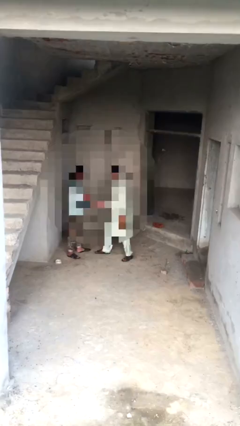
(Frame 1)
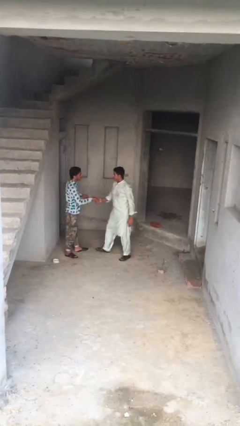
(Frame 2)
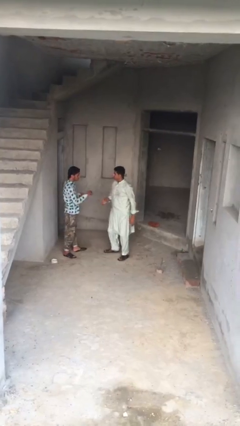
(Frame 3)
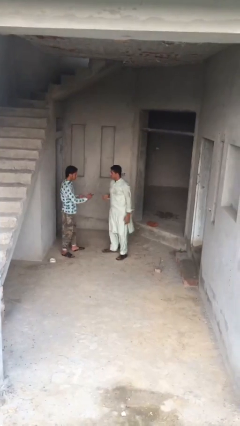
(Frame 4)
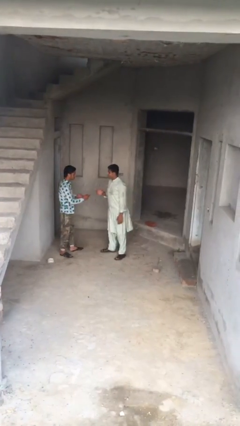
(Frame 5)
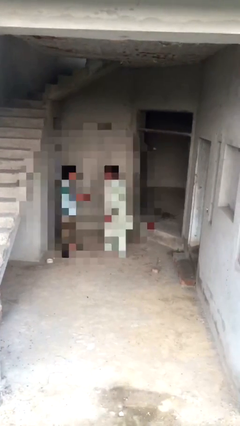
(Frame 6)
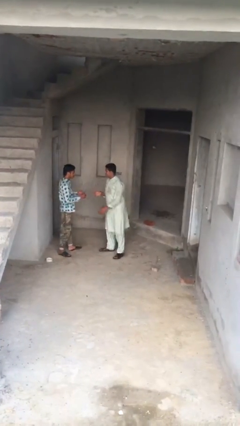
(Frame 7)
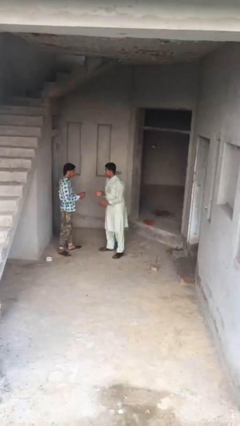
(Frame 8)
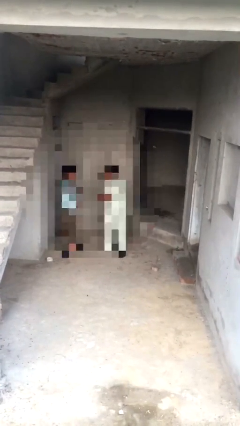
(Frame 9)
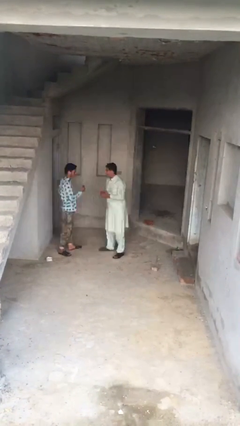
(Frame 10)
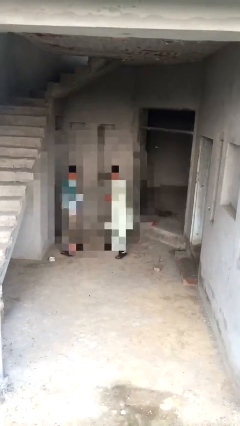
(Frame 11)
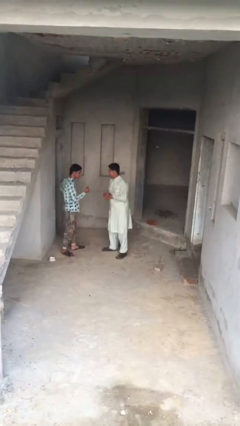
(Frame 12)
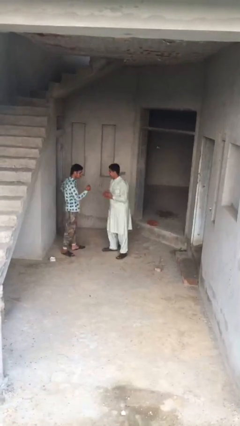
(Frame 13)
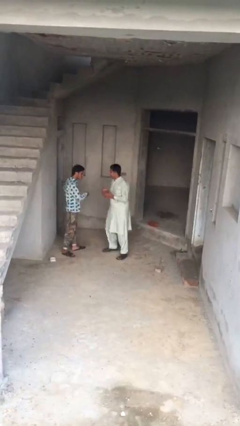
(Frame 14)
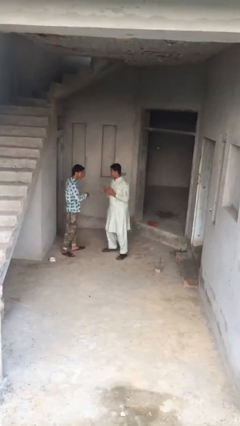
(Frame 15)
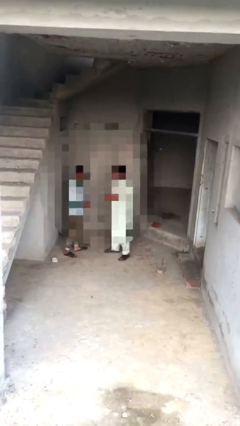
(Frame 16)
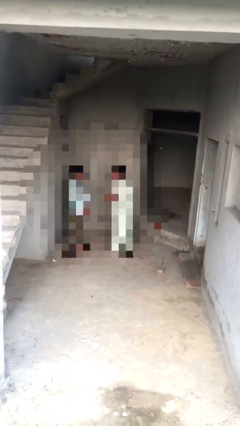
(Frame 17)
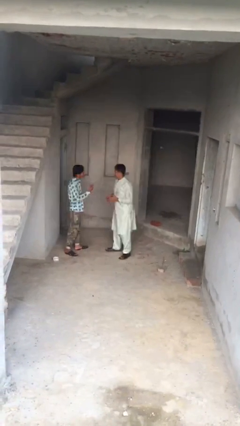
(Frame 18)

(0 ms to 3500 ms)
person talks to person

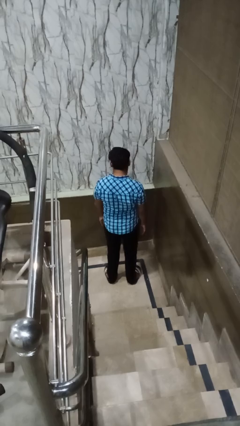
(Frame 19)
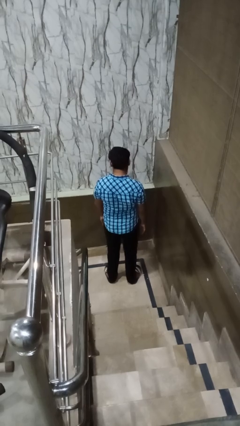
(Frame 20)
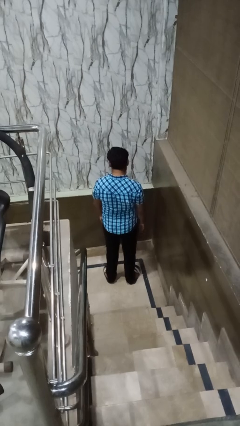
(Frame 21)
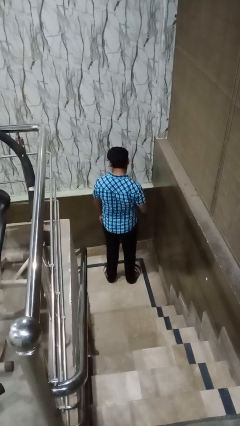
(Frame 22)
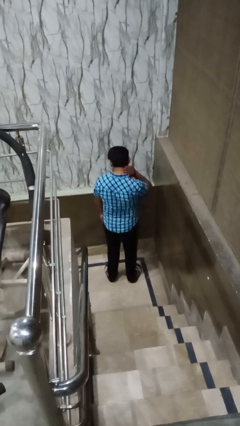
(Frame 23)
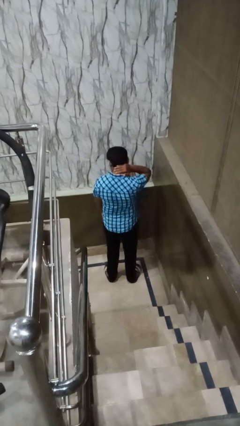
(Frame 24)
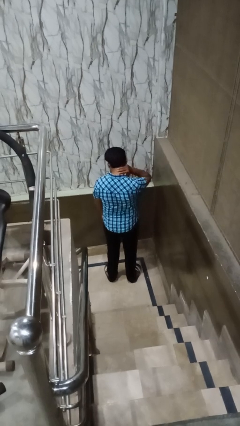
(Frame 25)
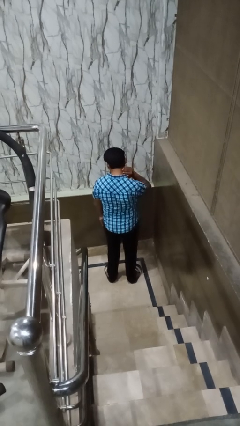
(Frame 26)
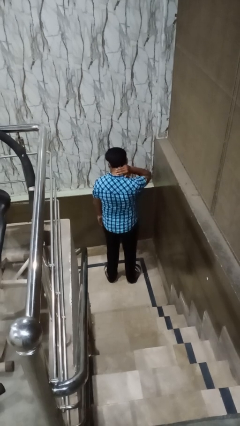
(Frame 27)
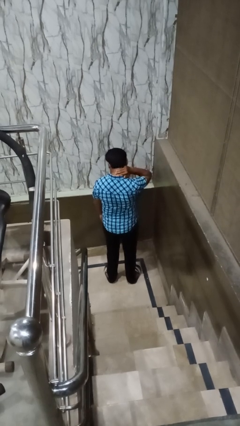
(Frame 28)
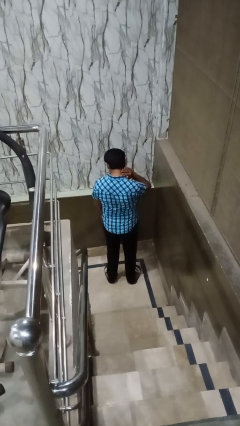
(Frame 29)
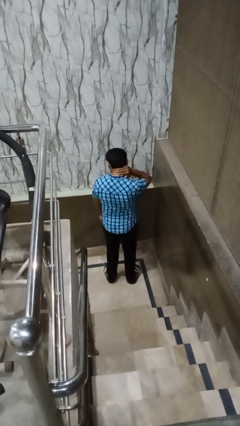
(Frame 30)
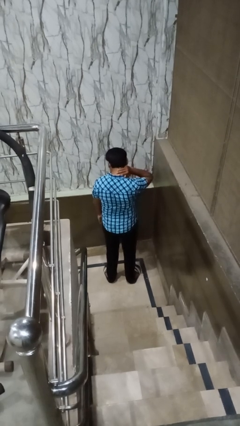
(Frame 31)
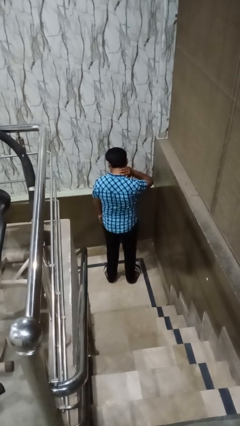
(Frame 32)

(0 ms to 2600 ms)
person rubs neck

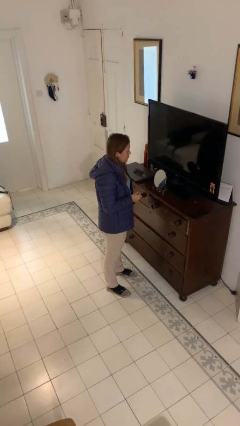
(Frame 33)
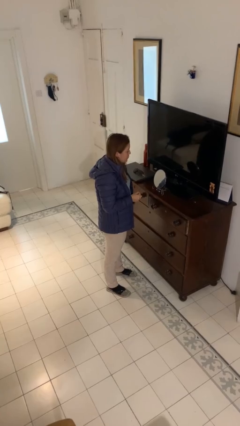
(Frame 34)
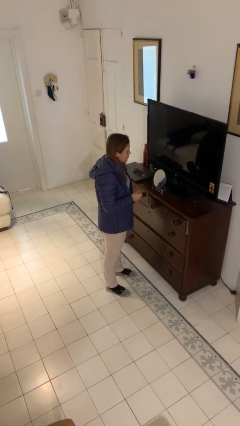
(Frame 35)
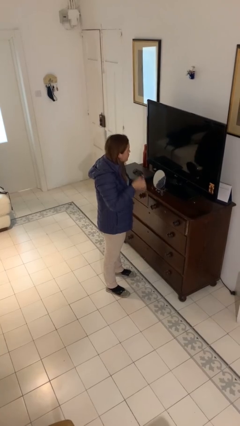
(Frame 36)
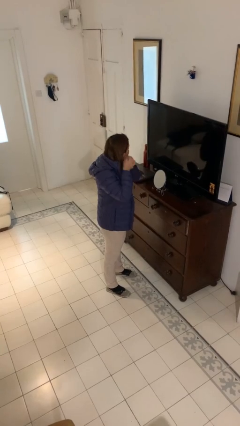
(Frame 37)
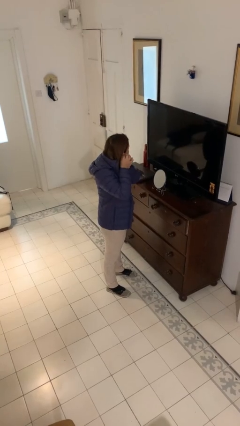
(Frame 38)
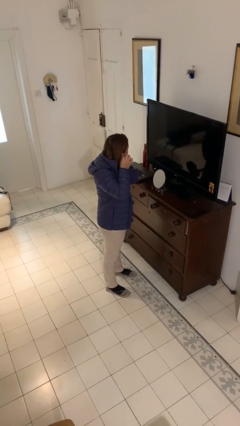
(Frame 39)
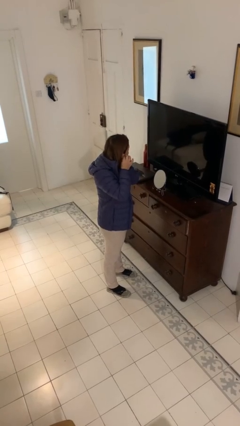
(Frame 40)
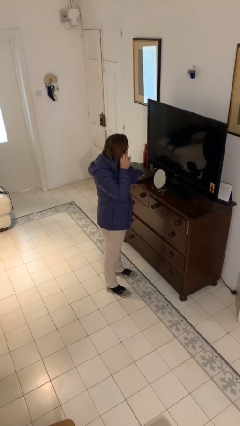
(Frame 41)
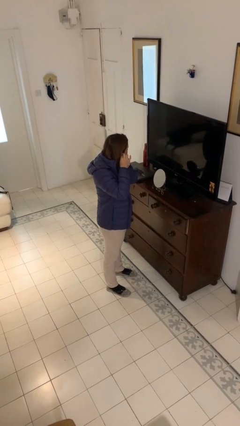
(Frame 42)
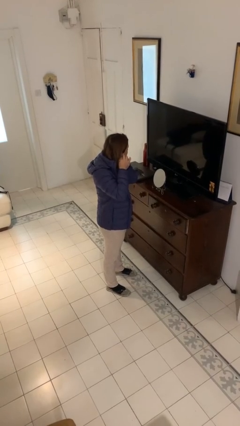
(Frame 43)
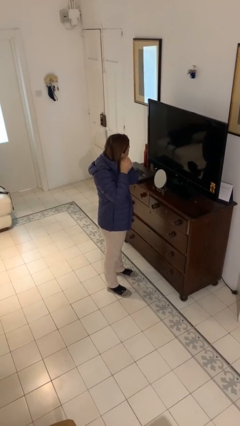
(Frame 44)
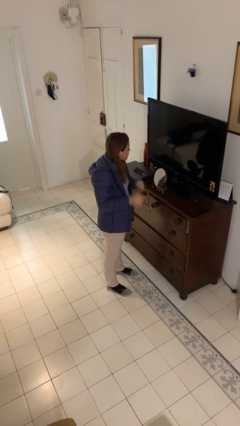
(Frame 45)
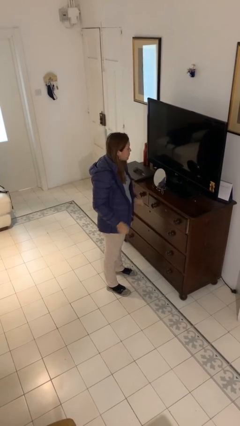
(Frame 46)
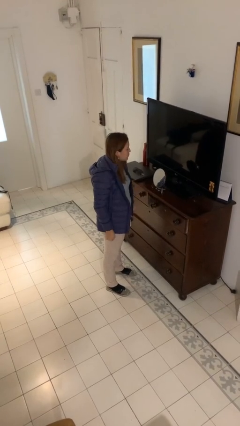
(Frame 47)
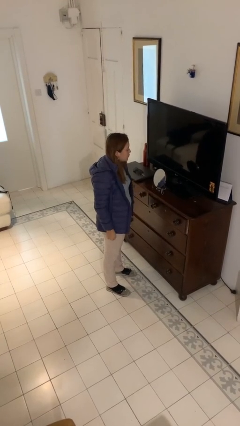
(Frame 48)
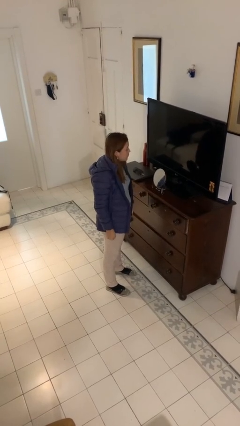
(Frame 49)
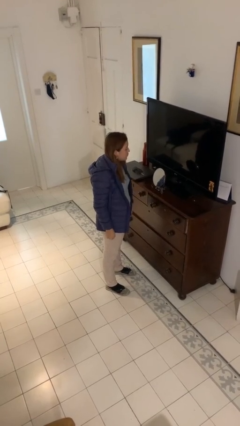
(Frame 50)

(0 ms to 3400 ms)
person puts on earrings

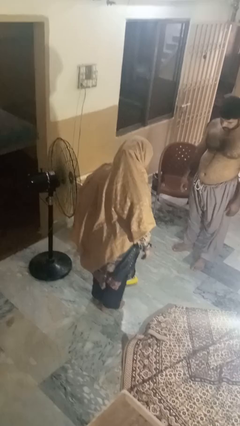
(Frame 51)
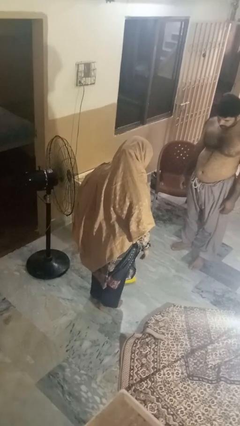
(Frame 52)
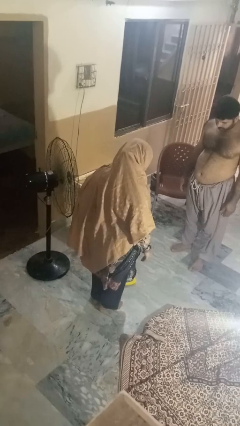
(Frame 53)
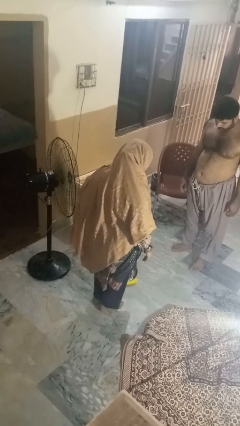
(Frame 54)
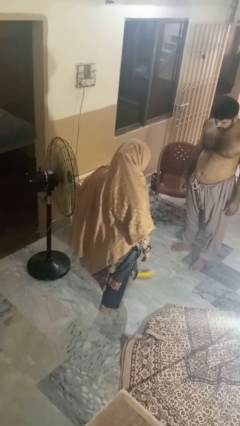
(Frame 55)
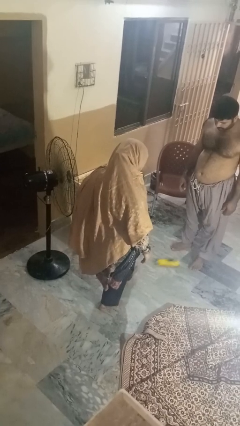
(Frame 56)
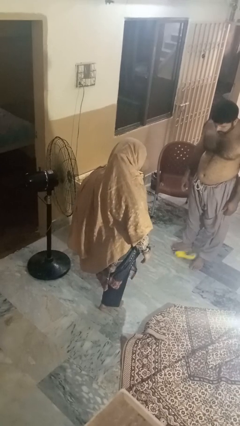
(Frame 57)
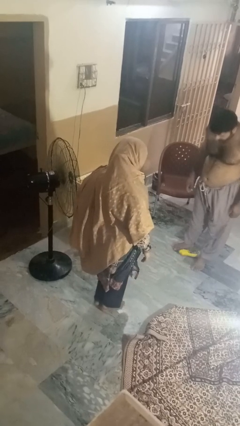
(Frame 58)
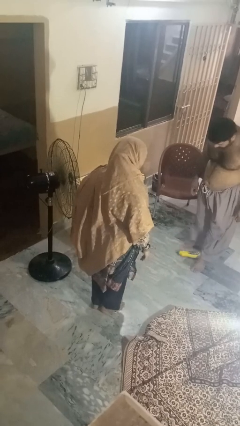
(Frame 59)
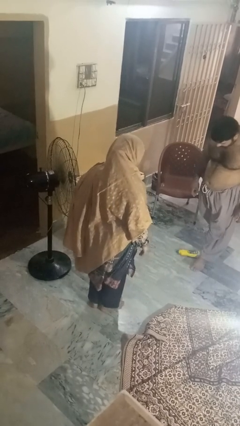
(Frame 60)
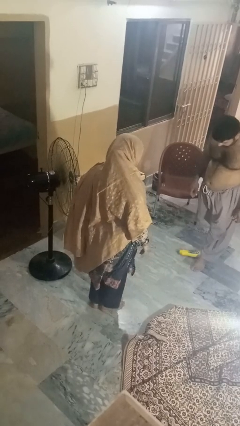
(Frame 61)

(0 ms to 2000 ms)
person kicks object to person

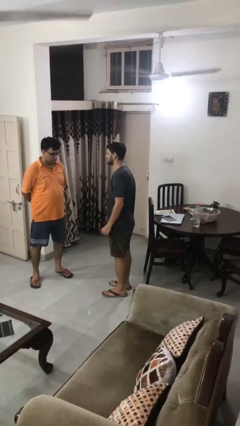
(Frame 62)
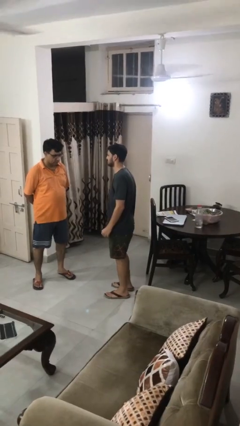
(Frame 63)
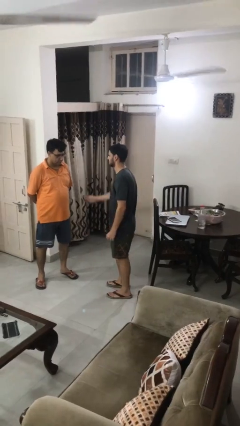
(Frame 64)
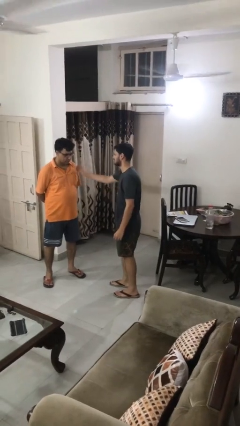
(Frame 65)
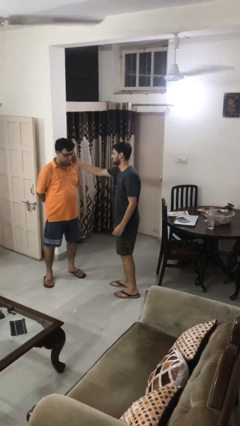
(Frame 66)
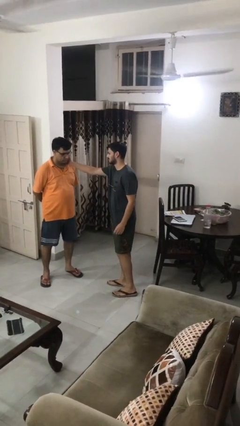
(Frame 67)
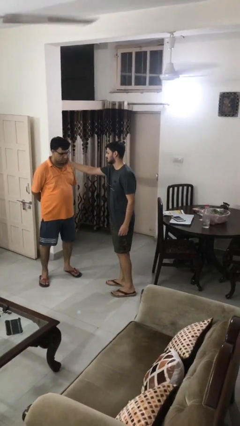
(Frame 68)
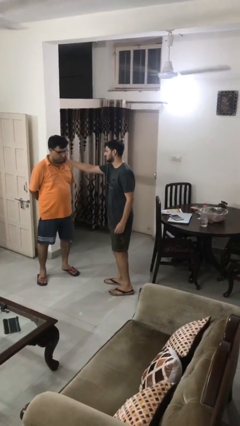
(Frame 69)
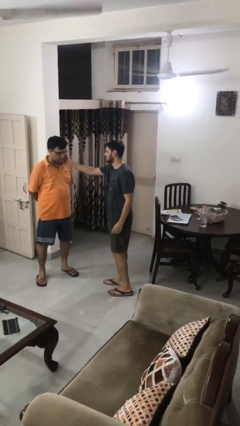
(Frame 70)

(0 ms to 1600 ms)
person touches face of person

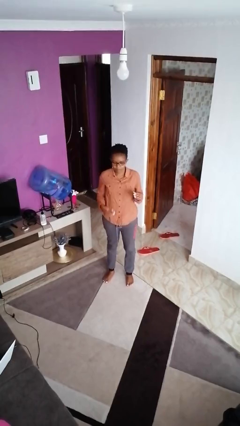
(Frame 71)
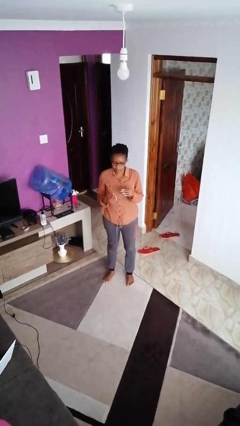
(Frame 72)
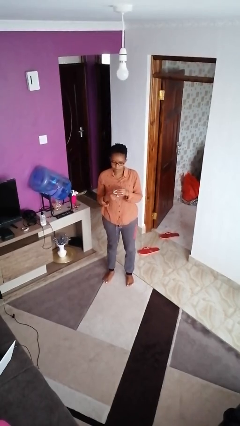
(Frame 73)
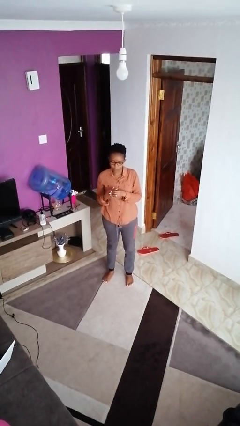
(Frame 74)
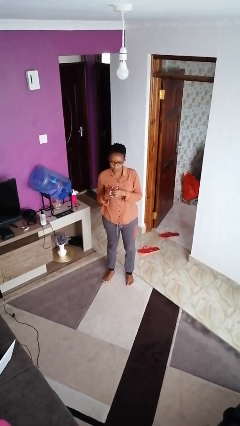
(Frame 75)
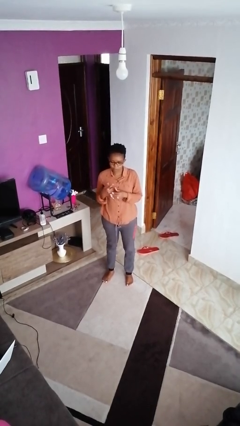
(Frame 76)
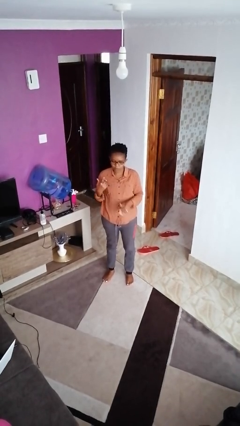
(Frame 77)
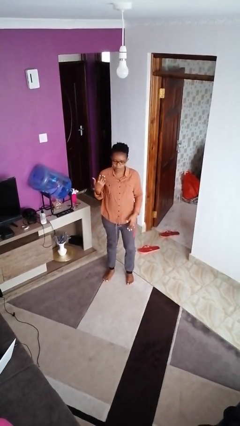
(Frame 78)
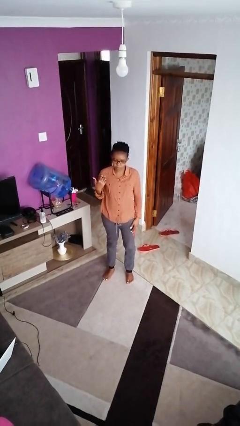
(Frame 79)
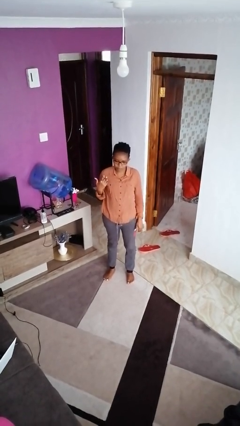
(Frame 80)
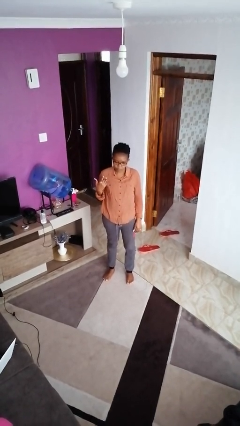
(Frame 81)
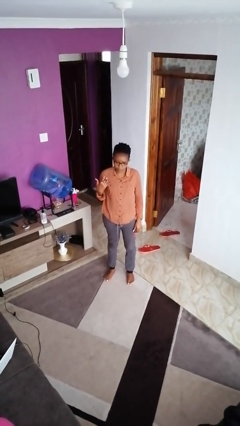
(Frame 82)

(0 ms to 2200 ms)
person puts on ring

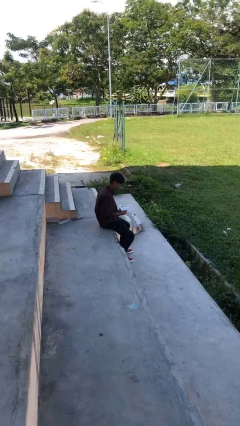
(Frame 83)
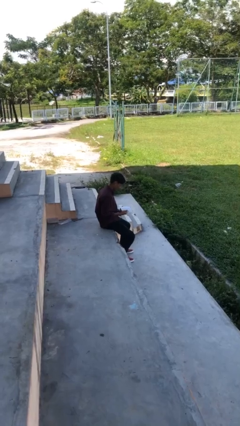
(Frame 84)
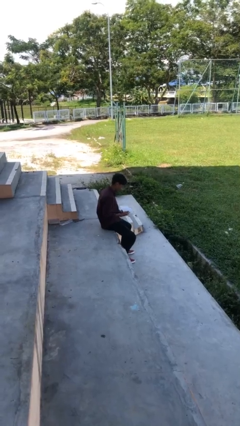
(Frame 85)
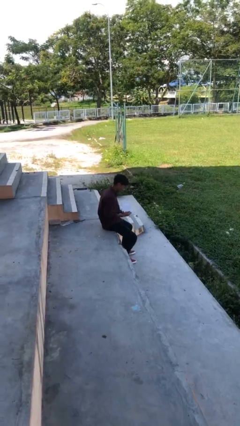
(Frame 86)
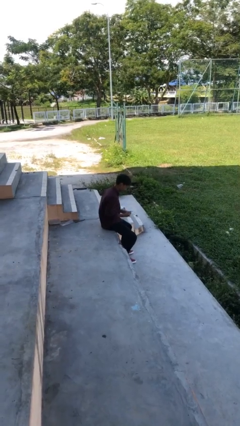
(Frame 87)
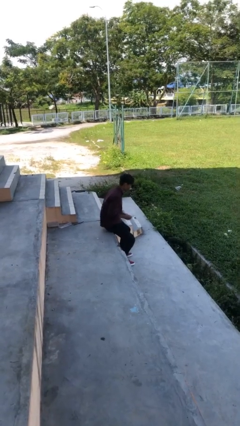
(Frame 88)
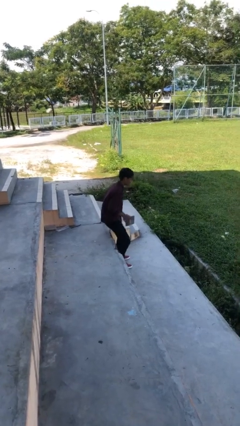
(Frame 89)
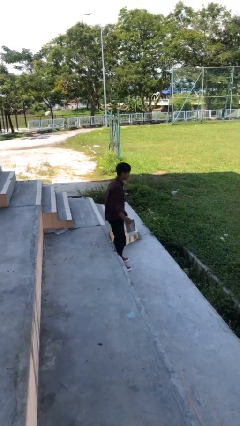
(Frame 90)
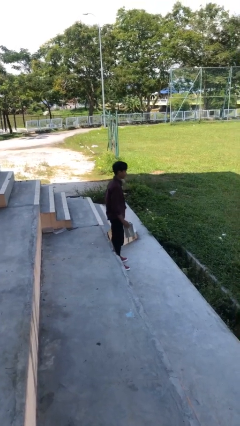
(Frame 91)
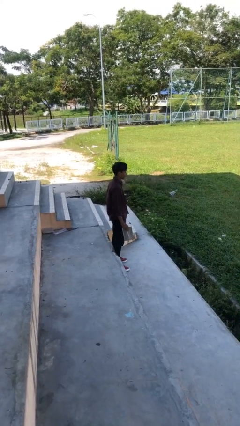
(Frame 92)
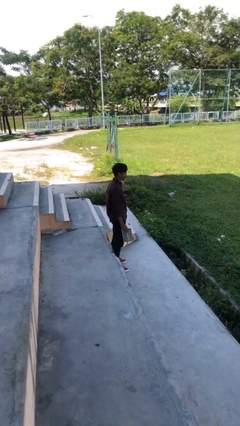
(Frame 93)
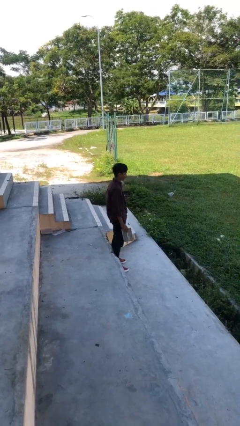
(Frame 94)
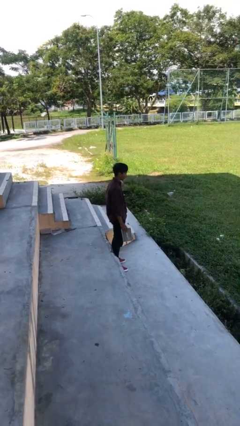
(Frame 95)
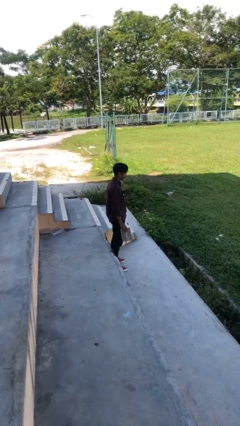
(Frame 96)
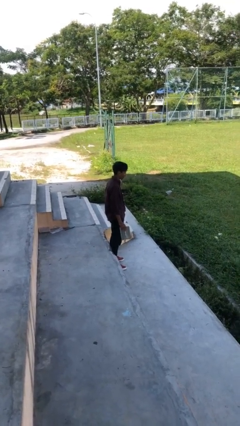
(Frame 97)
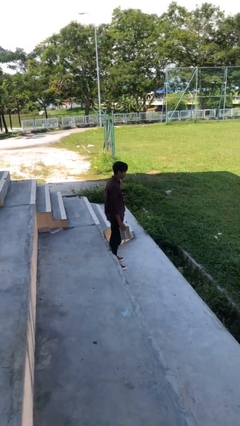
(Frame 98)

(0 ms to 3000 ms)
person stands up
